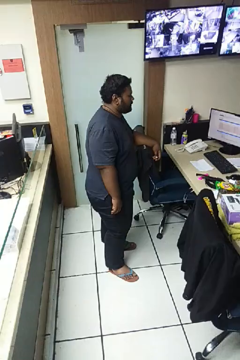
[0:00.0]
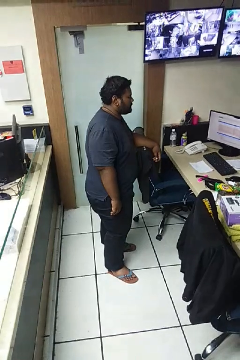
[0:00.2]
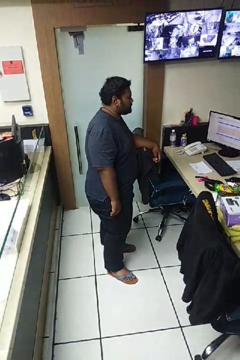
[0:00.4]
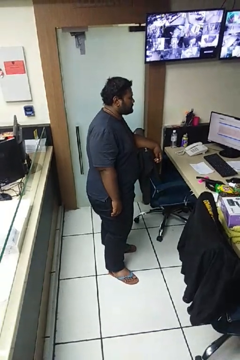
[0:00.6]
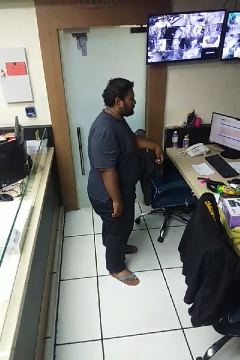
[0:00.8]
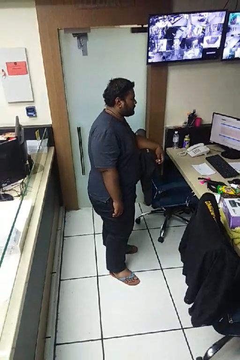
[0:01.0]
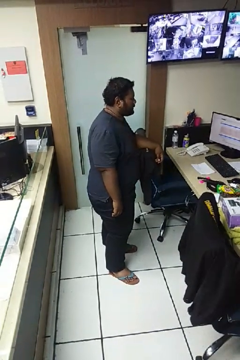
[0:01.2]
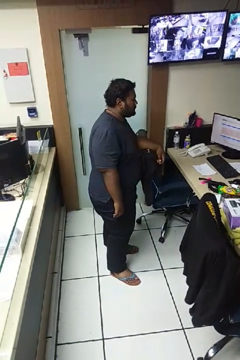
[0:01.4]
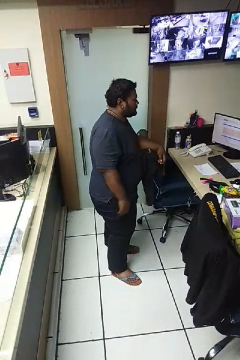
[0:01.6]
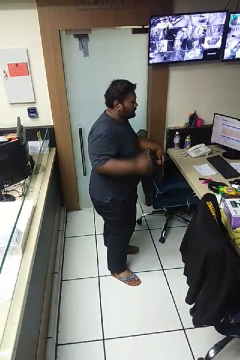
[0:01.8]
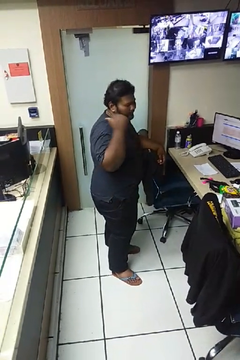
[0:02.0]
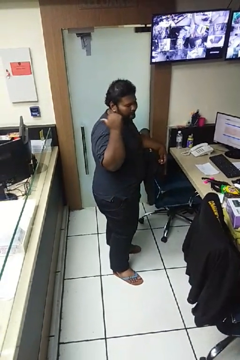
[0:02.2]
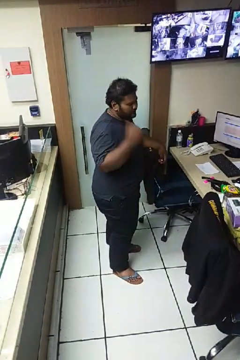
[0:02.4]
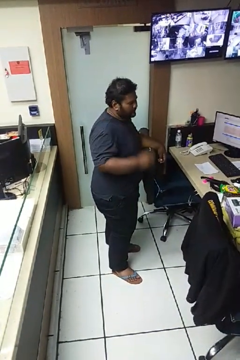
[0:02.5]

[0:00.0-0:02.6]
person gestures behind me

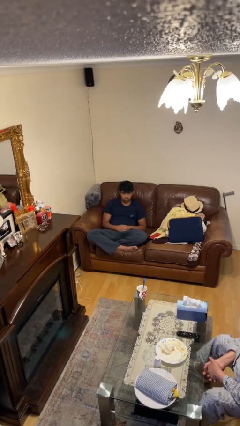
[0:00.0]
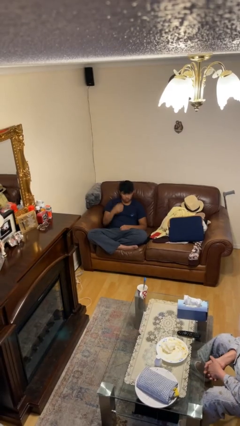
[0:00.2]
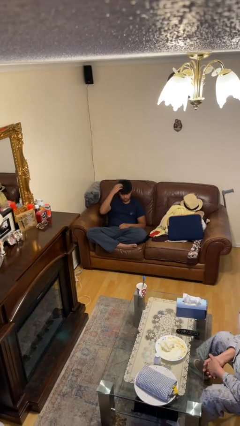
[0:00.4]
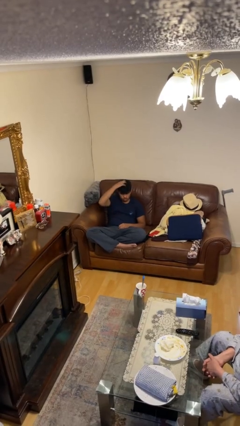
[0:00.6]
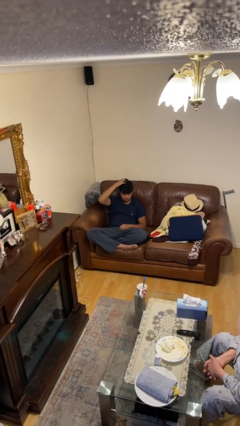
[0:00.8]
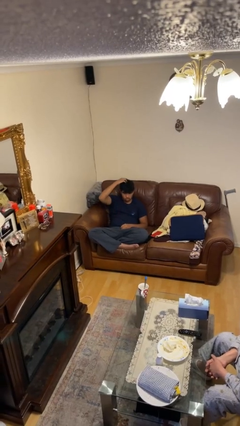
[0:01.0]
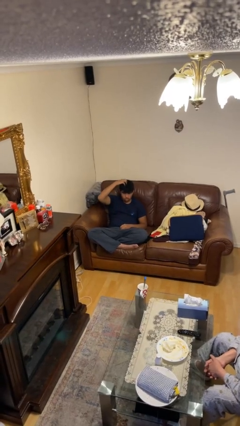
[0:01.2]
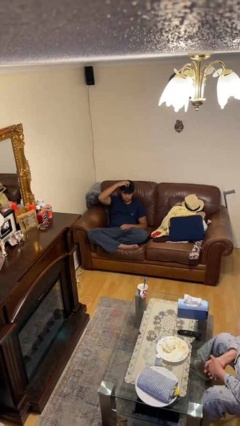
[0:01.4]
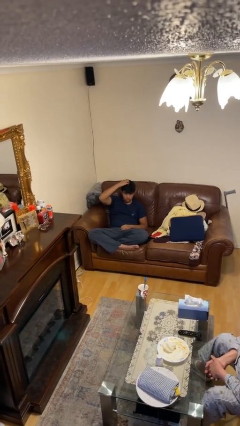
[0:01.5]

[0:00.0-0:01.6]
person strokes hair

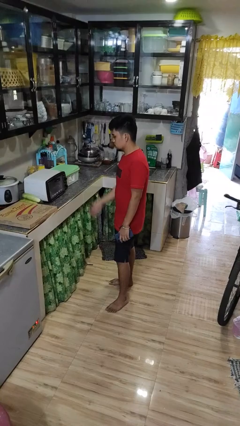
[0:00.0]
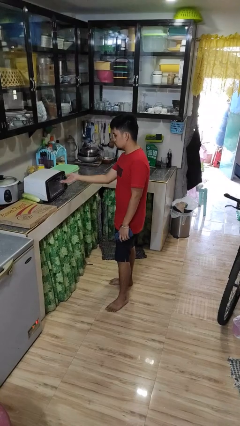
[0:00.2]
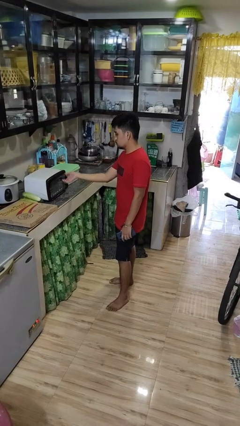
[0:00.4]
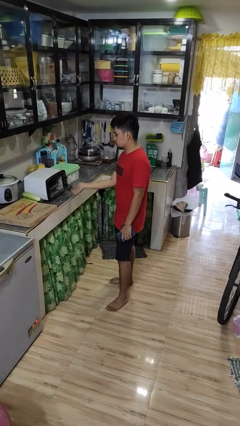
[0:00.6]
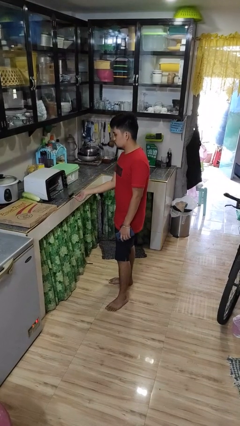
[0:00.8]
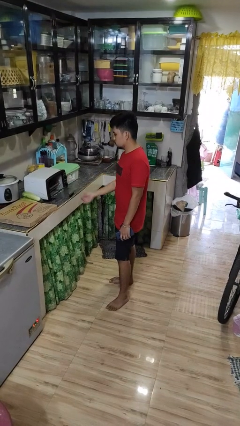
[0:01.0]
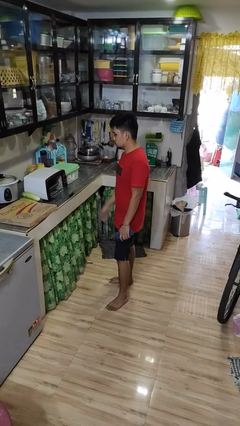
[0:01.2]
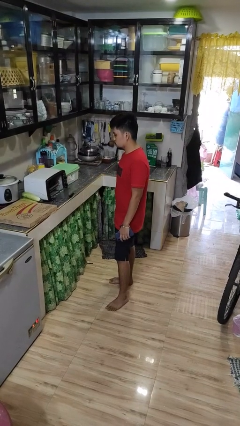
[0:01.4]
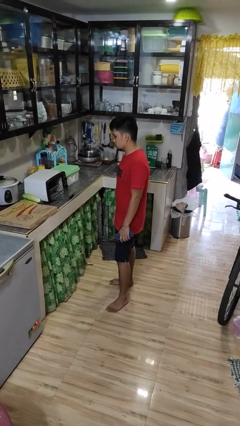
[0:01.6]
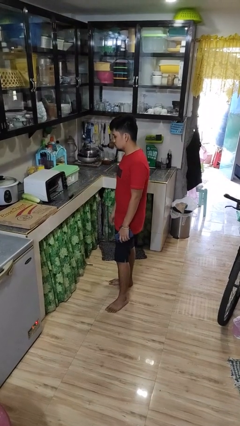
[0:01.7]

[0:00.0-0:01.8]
person opens microwave

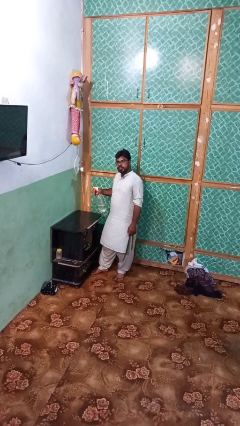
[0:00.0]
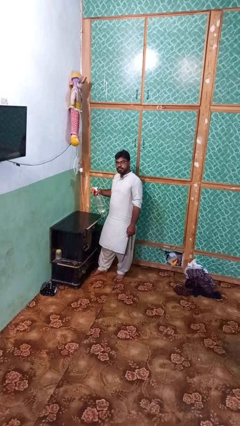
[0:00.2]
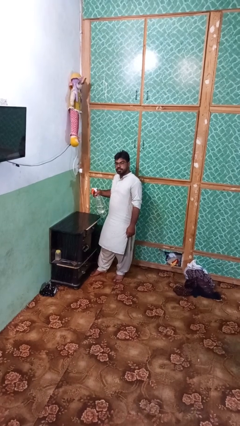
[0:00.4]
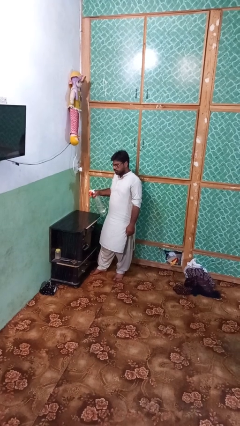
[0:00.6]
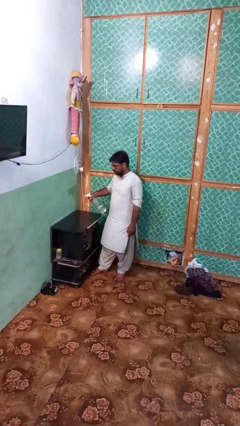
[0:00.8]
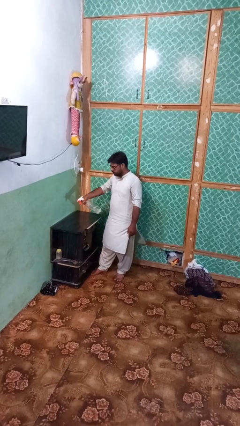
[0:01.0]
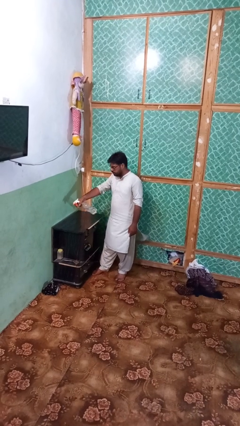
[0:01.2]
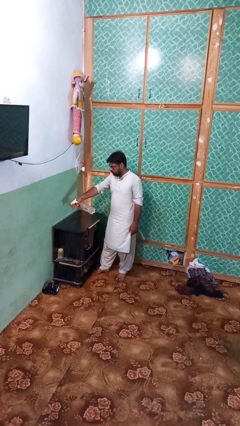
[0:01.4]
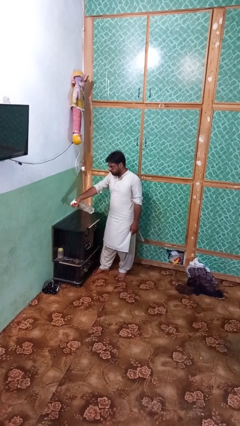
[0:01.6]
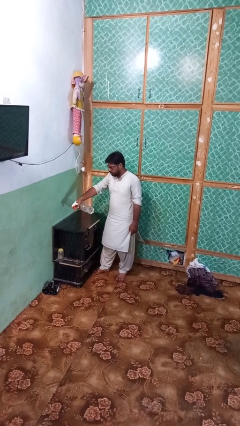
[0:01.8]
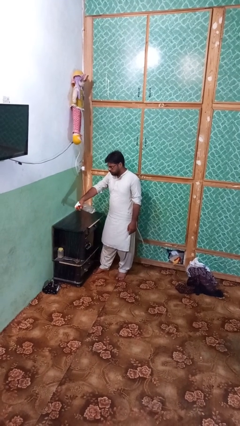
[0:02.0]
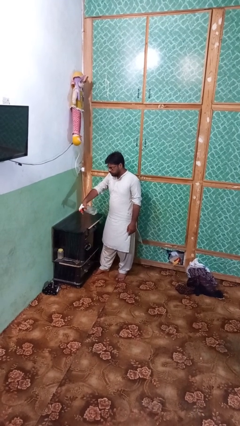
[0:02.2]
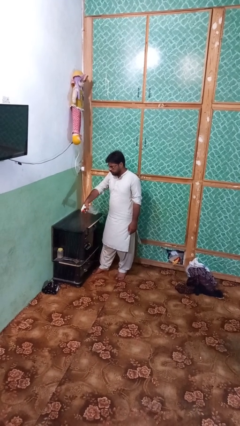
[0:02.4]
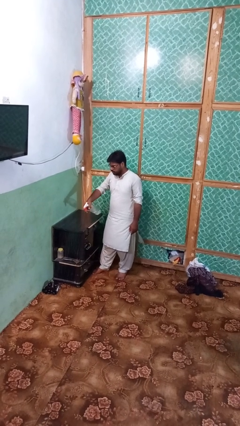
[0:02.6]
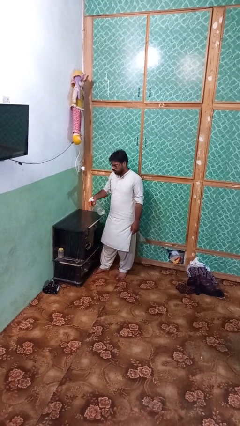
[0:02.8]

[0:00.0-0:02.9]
person sprays from bottle

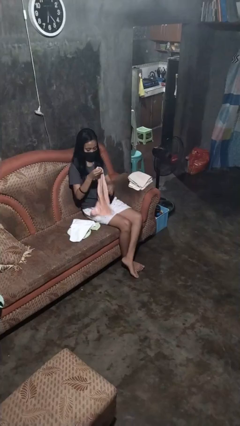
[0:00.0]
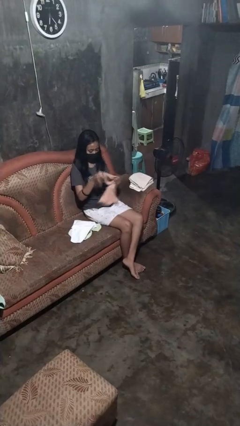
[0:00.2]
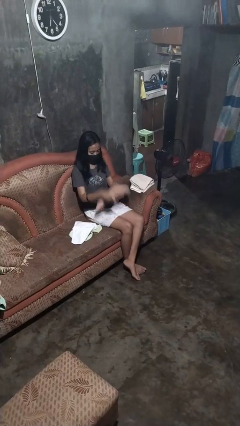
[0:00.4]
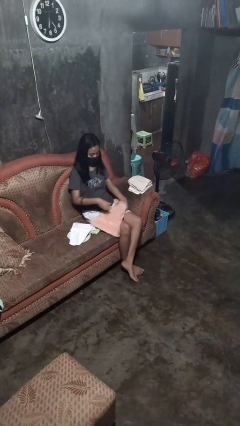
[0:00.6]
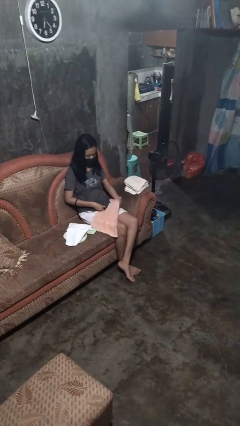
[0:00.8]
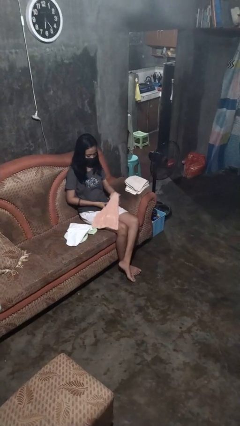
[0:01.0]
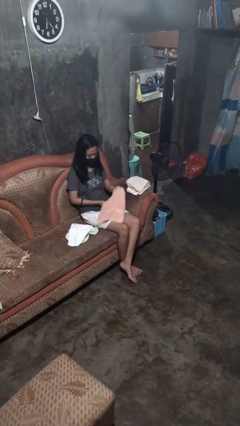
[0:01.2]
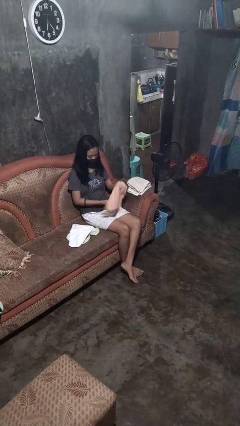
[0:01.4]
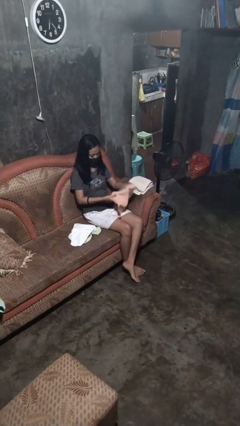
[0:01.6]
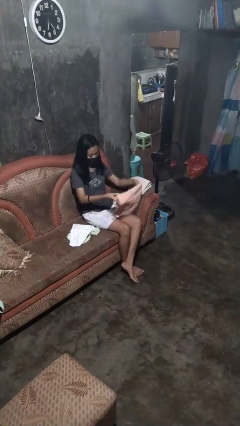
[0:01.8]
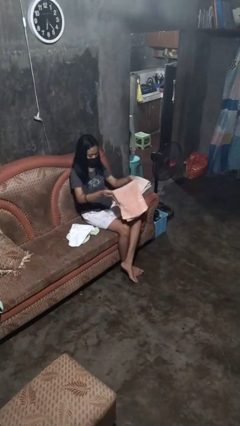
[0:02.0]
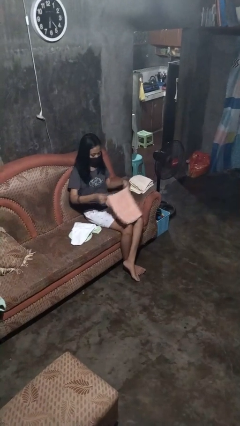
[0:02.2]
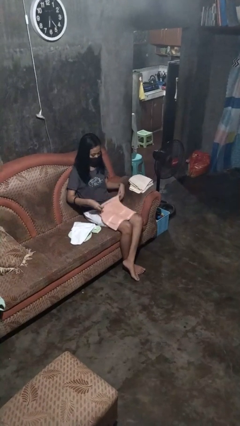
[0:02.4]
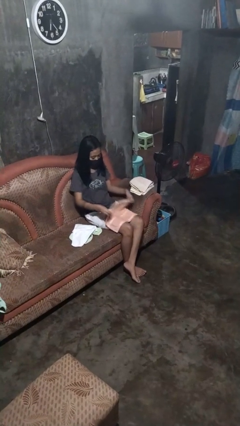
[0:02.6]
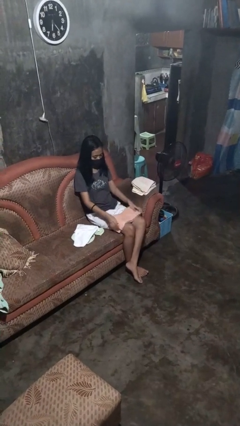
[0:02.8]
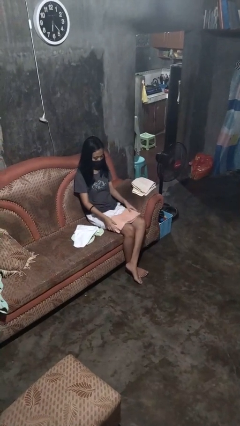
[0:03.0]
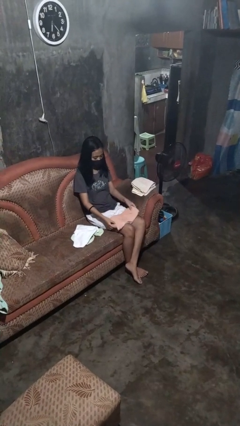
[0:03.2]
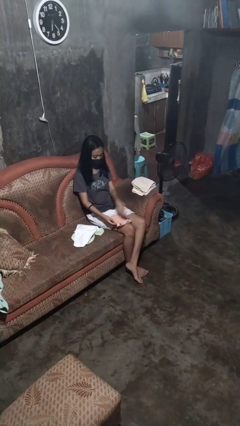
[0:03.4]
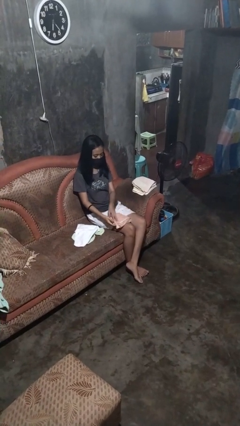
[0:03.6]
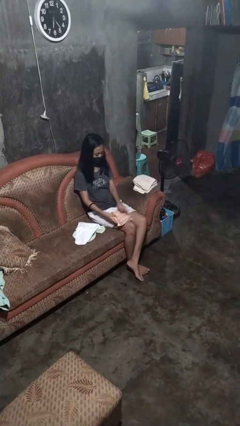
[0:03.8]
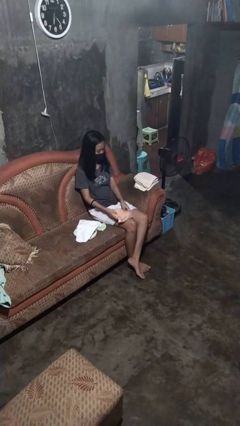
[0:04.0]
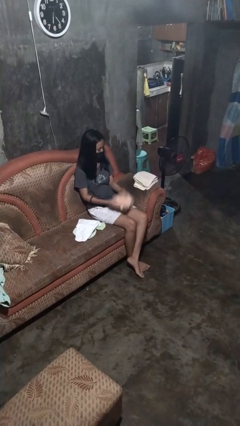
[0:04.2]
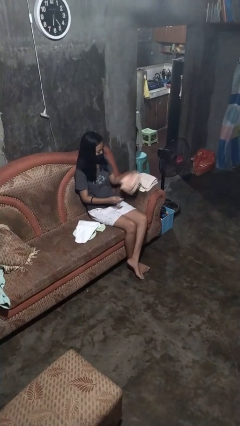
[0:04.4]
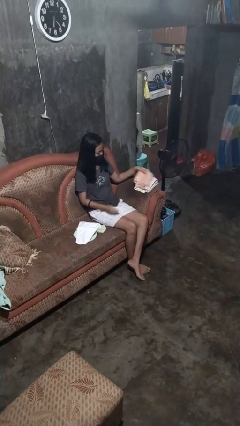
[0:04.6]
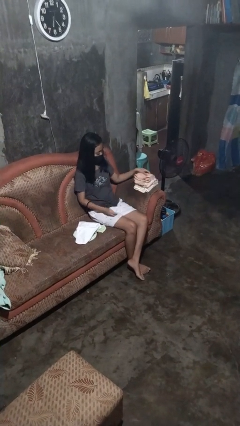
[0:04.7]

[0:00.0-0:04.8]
person folds towel

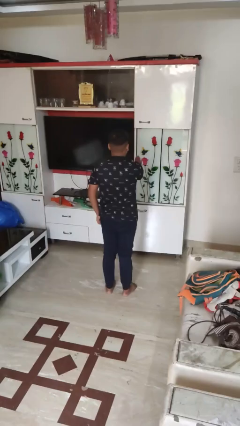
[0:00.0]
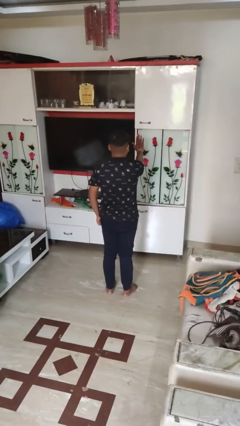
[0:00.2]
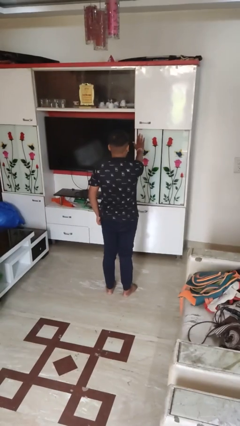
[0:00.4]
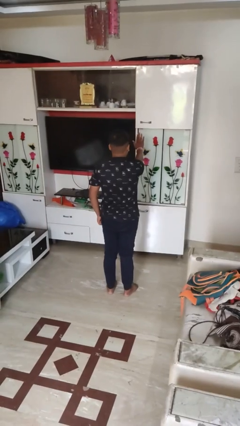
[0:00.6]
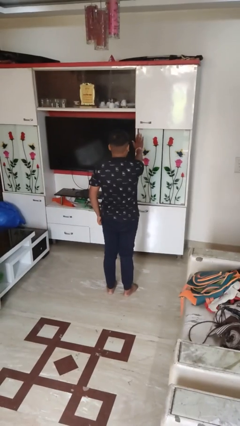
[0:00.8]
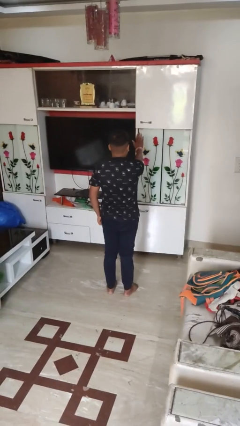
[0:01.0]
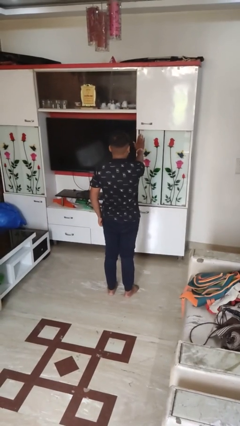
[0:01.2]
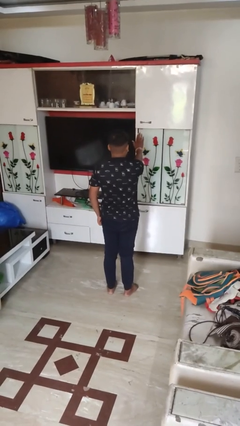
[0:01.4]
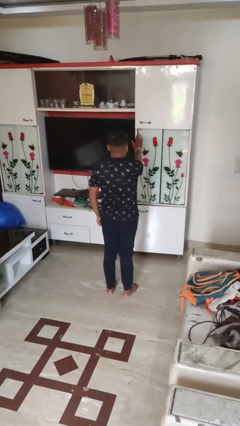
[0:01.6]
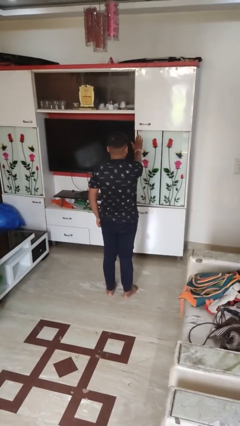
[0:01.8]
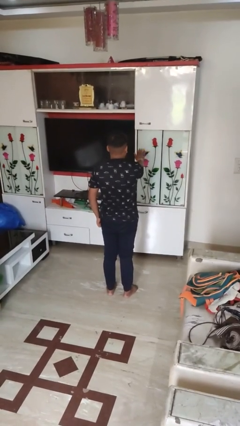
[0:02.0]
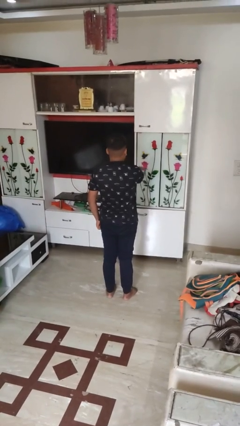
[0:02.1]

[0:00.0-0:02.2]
person gestures stop

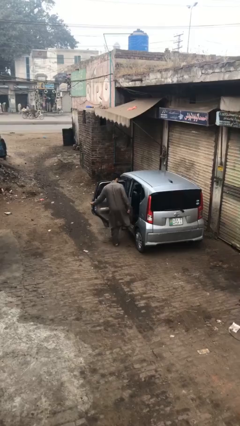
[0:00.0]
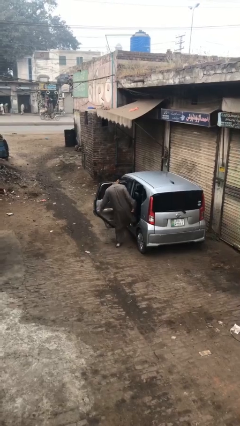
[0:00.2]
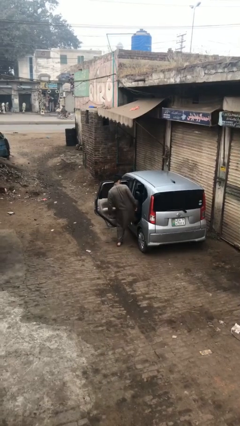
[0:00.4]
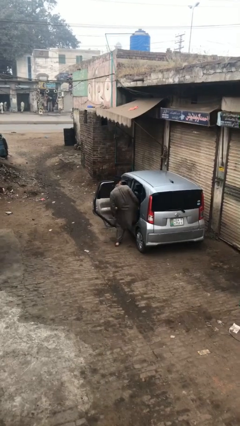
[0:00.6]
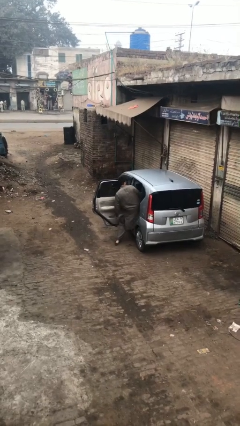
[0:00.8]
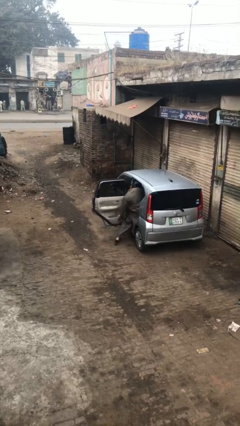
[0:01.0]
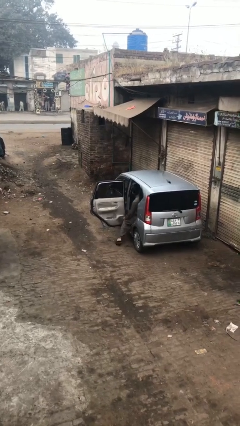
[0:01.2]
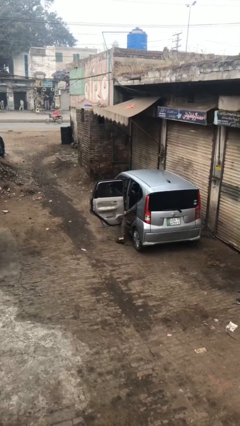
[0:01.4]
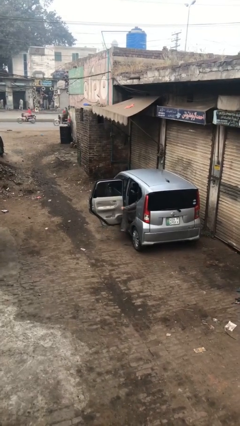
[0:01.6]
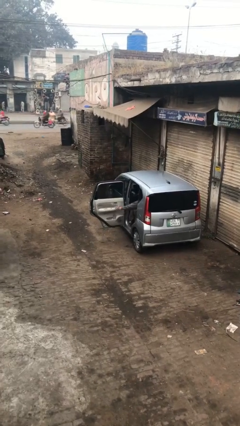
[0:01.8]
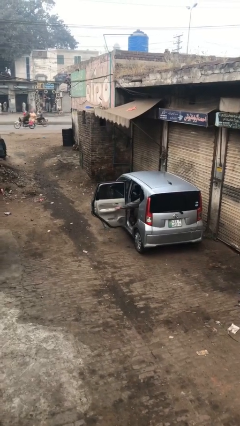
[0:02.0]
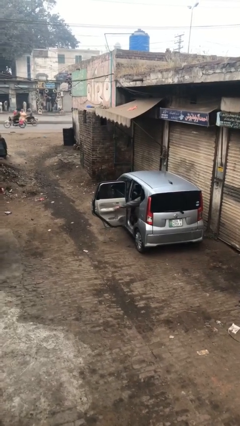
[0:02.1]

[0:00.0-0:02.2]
person enters car
